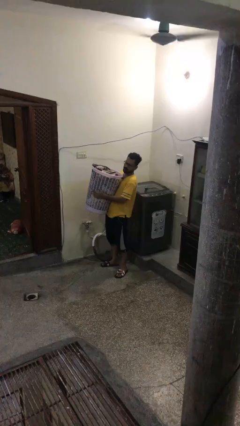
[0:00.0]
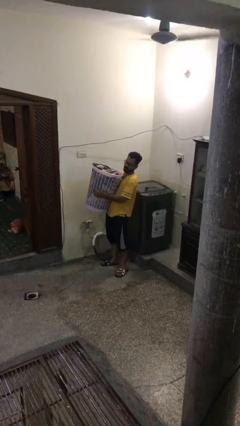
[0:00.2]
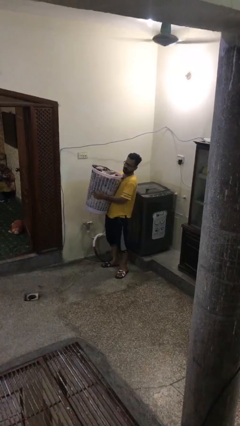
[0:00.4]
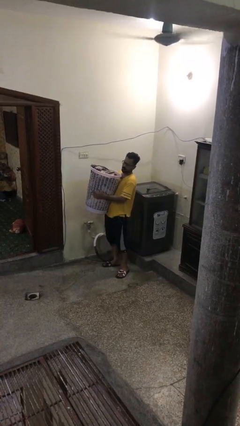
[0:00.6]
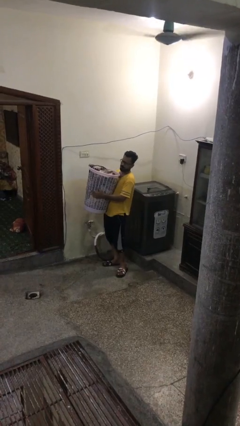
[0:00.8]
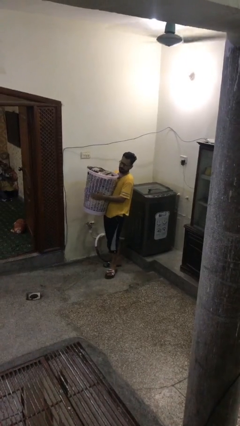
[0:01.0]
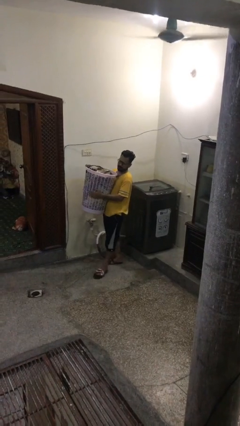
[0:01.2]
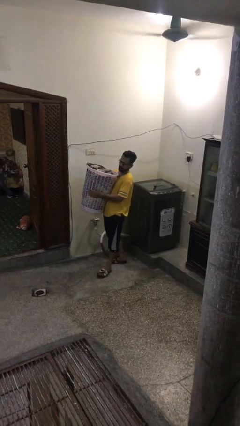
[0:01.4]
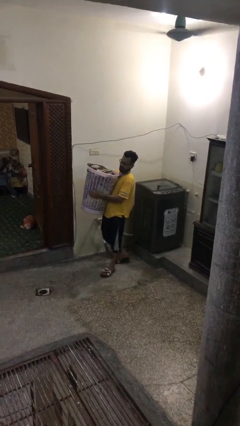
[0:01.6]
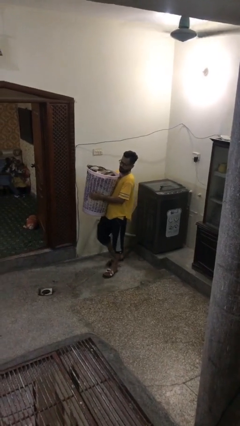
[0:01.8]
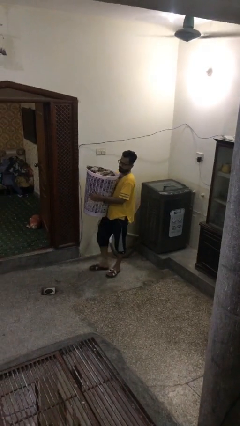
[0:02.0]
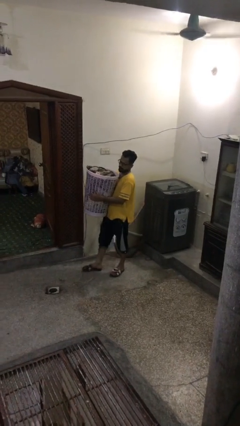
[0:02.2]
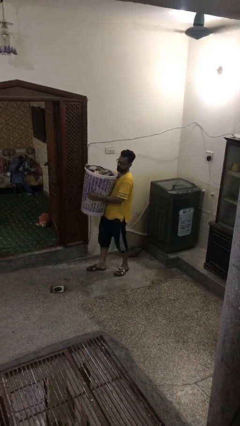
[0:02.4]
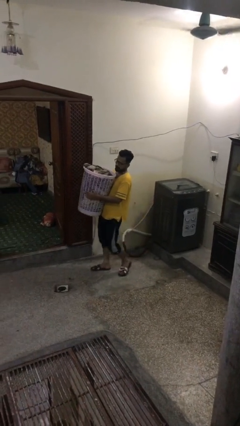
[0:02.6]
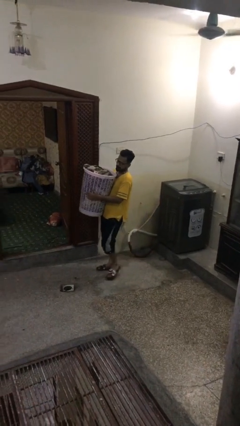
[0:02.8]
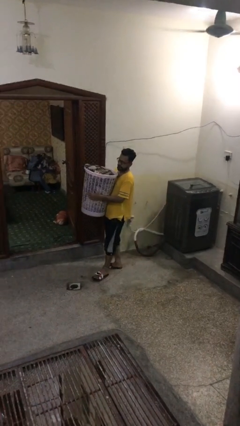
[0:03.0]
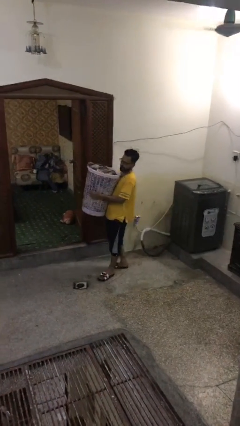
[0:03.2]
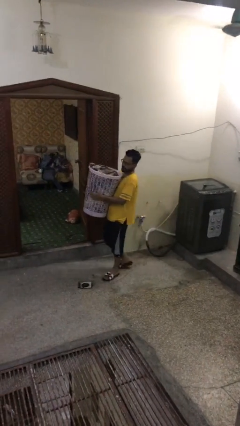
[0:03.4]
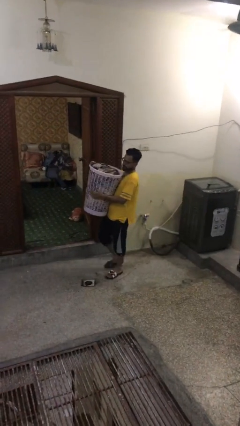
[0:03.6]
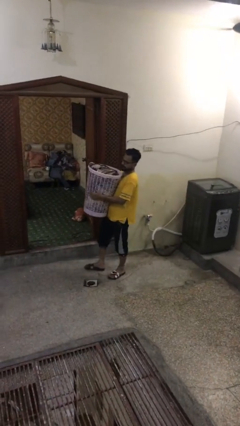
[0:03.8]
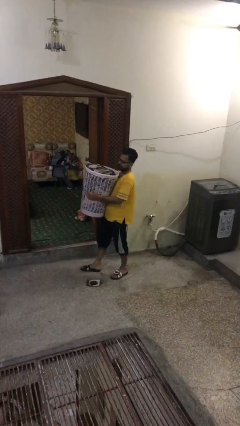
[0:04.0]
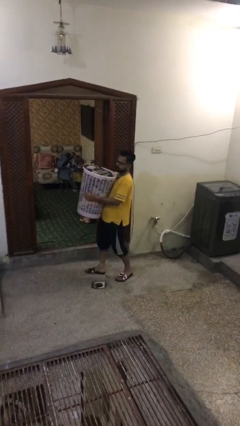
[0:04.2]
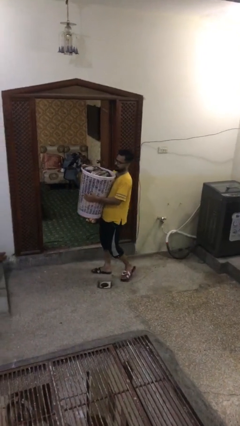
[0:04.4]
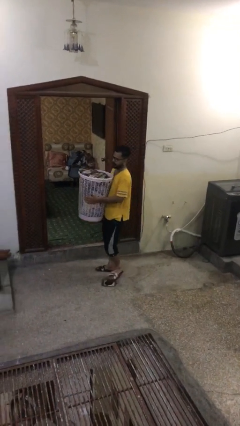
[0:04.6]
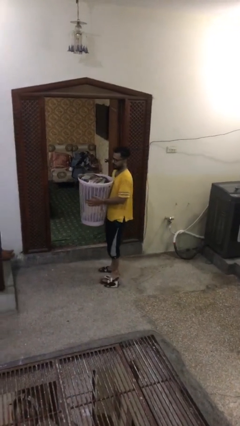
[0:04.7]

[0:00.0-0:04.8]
person carries heavy object

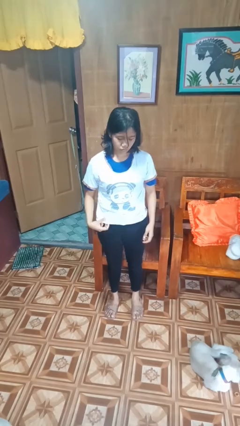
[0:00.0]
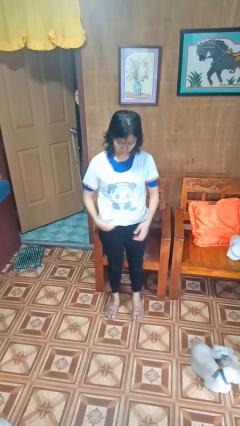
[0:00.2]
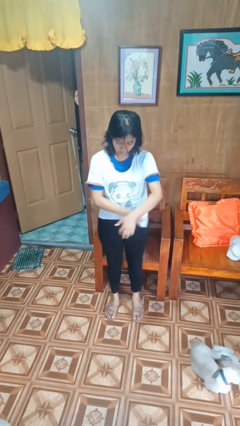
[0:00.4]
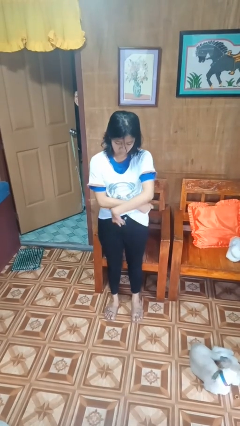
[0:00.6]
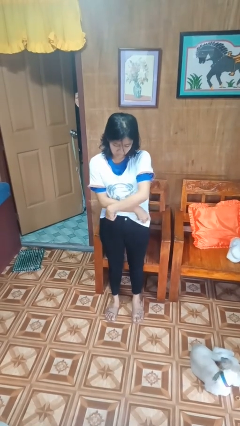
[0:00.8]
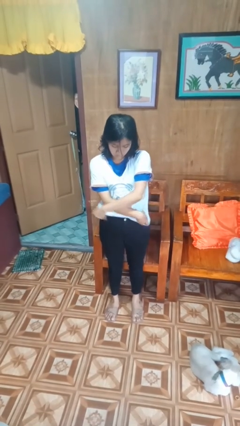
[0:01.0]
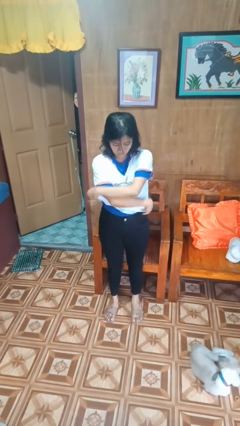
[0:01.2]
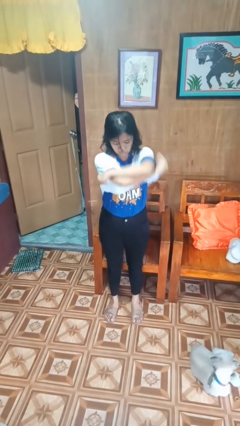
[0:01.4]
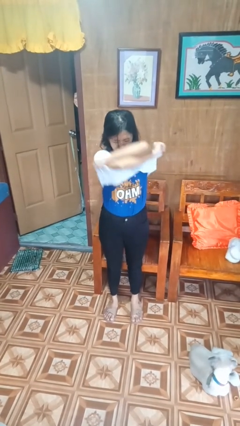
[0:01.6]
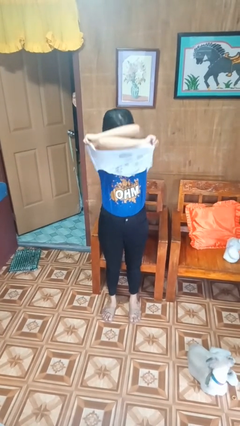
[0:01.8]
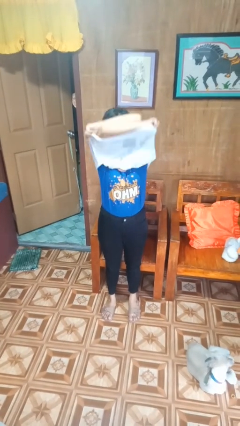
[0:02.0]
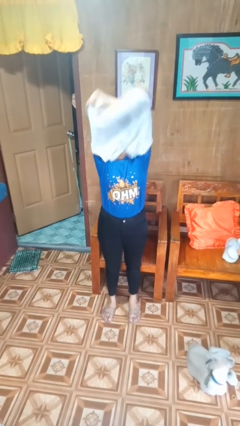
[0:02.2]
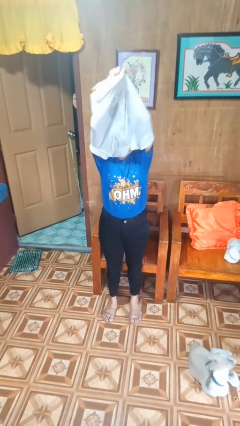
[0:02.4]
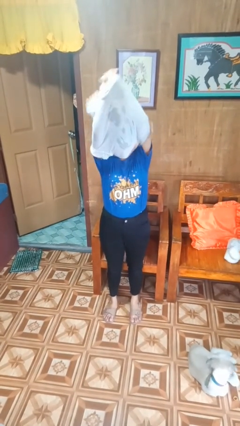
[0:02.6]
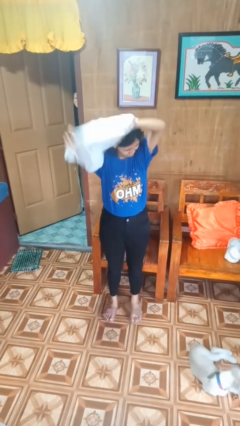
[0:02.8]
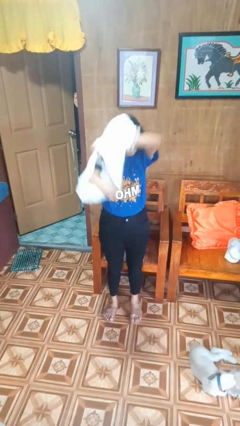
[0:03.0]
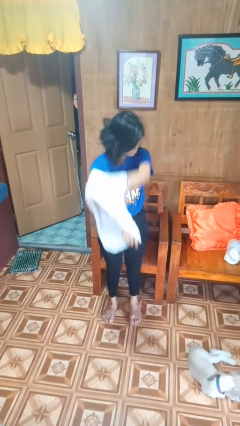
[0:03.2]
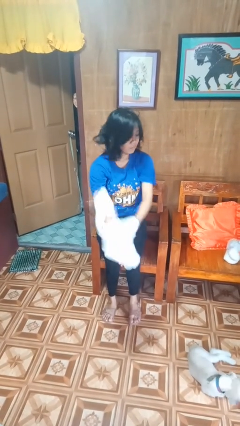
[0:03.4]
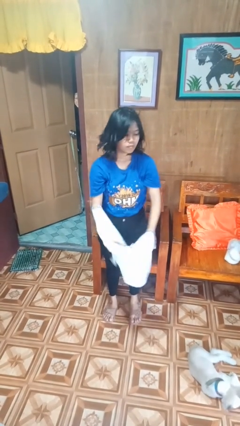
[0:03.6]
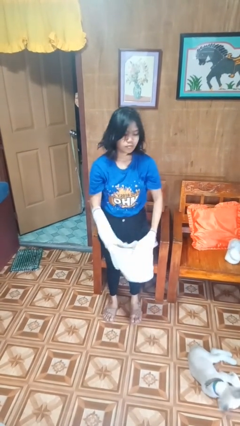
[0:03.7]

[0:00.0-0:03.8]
person takes off shirt

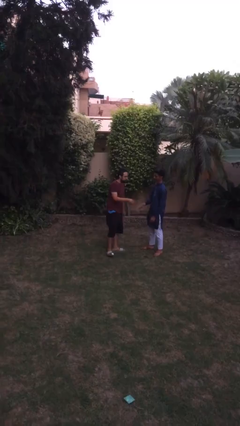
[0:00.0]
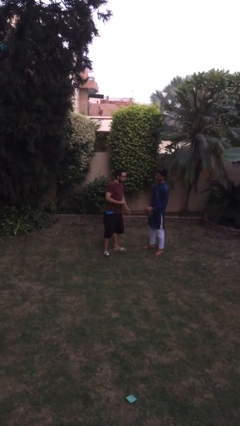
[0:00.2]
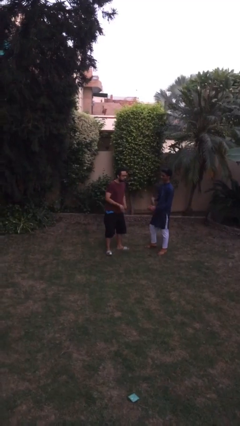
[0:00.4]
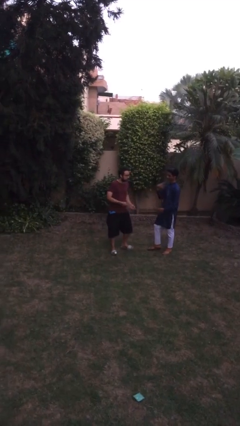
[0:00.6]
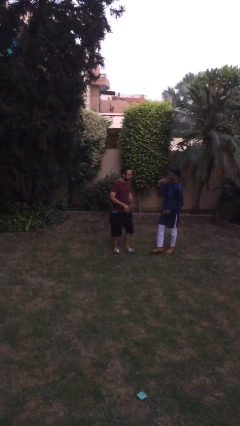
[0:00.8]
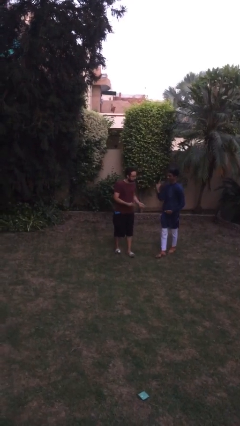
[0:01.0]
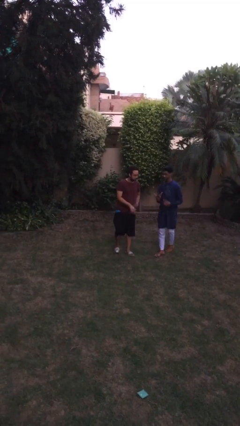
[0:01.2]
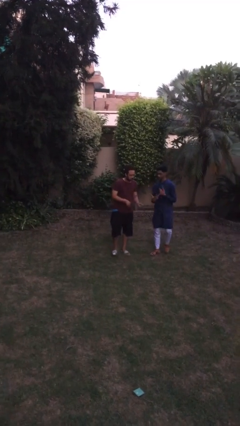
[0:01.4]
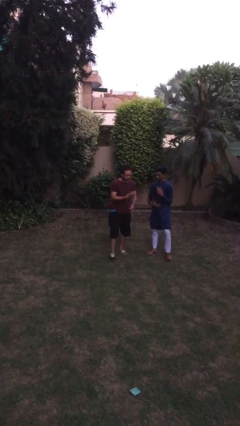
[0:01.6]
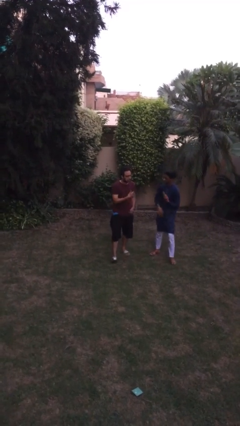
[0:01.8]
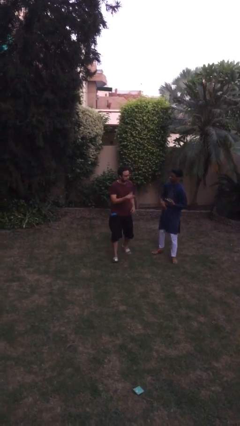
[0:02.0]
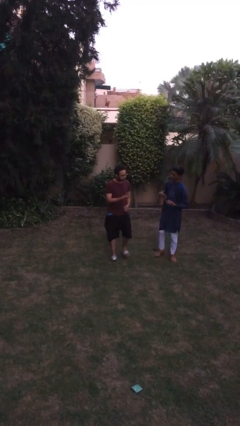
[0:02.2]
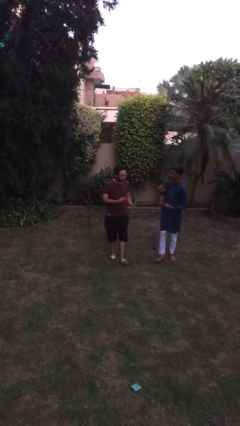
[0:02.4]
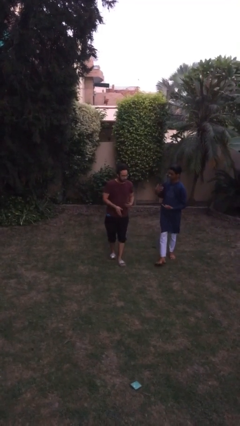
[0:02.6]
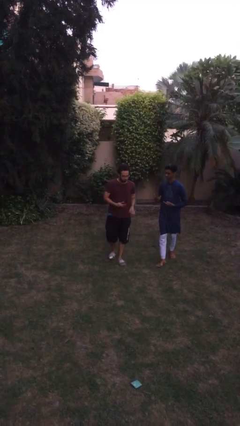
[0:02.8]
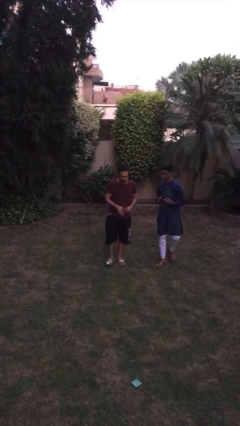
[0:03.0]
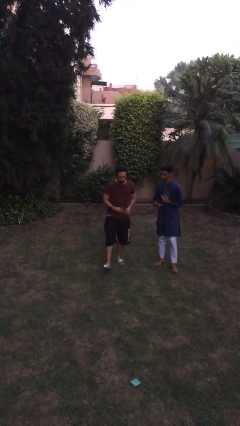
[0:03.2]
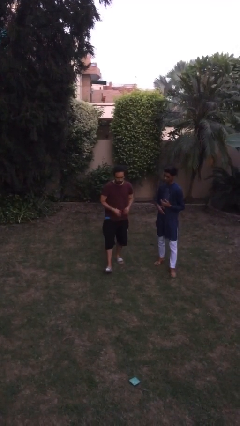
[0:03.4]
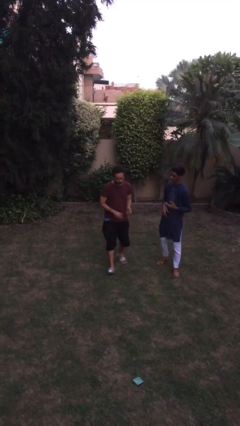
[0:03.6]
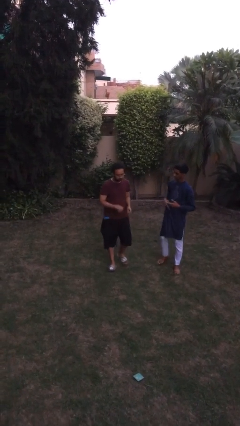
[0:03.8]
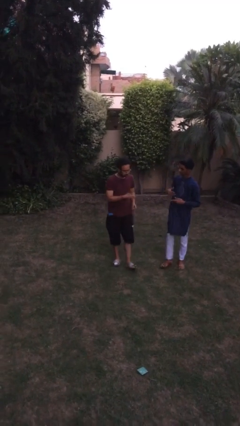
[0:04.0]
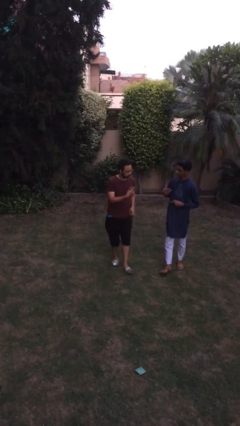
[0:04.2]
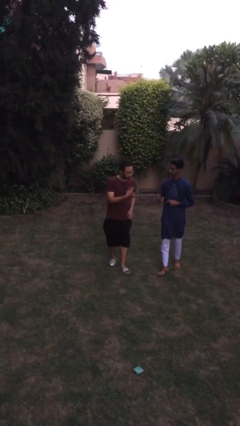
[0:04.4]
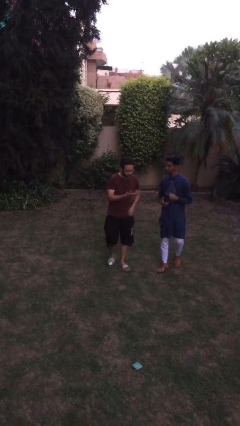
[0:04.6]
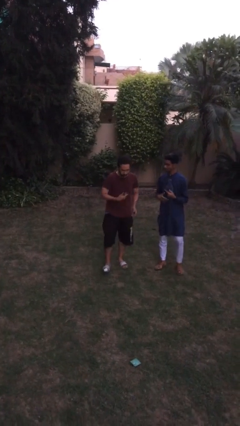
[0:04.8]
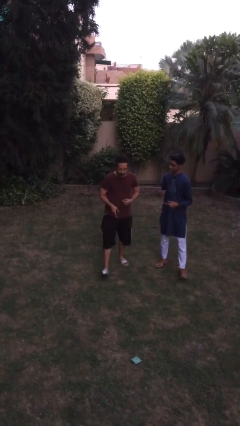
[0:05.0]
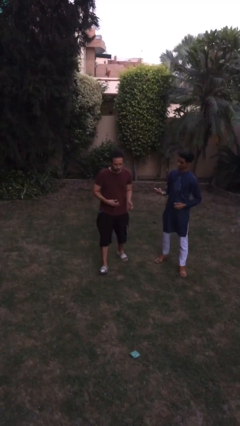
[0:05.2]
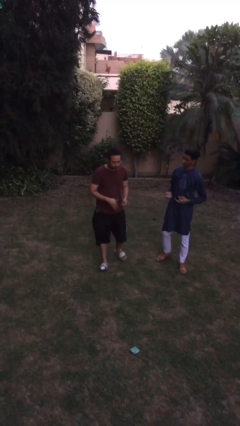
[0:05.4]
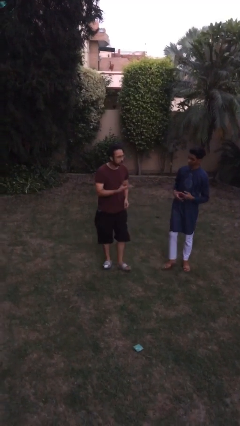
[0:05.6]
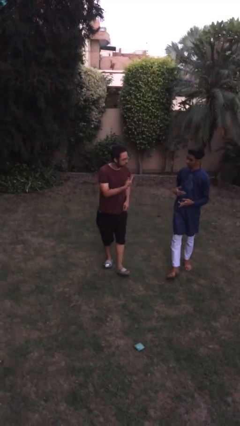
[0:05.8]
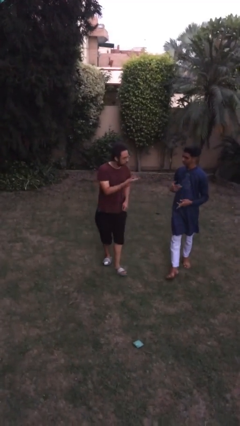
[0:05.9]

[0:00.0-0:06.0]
person talks to person

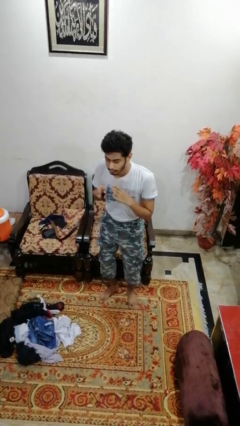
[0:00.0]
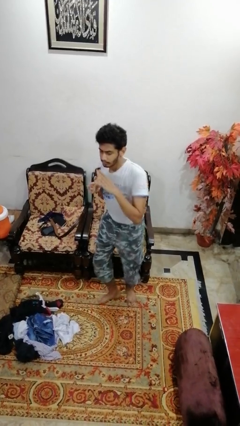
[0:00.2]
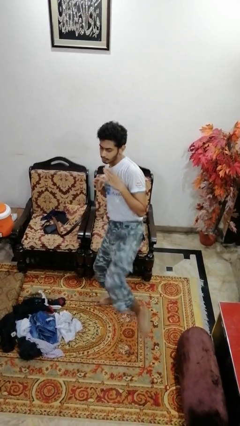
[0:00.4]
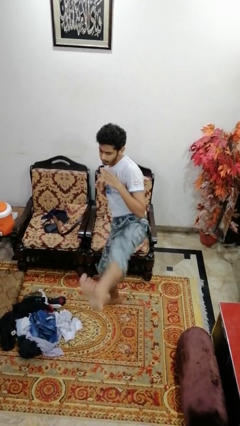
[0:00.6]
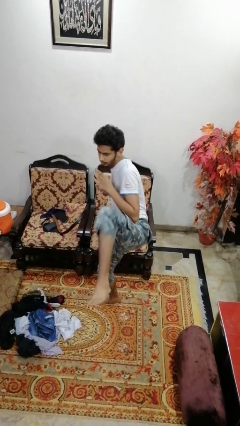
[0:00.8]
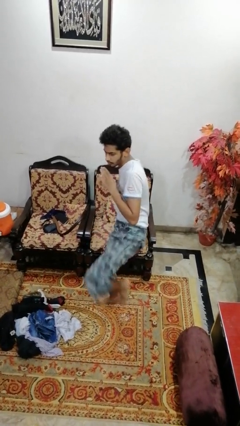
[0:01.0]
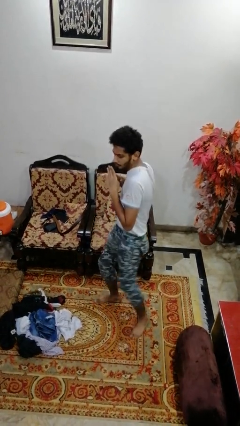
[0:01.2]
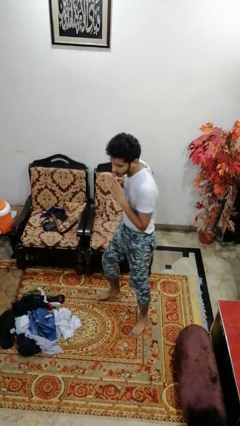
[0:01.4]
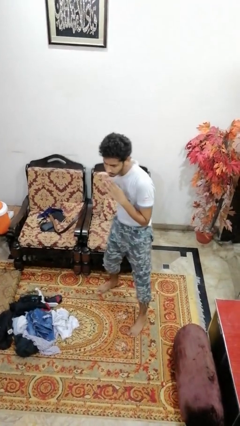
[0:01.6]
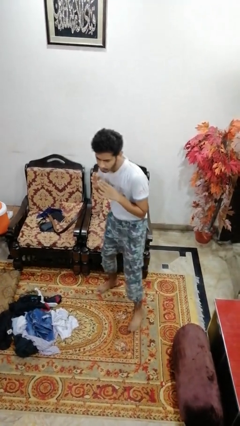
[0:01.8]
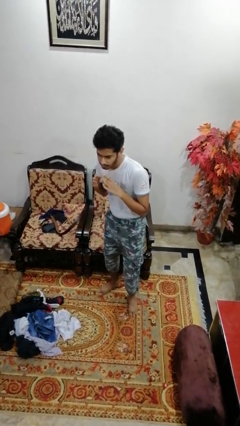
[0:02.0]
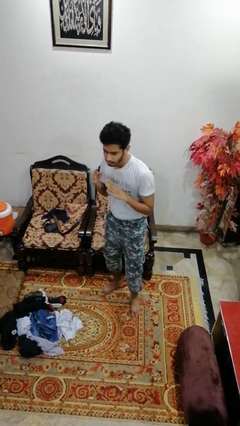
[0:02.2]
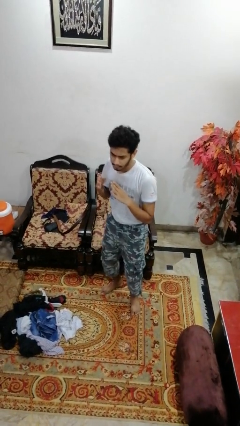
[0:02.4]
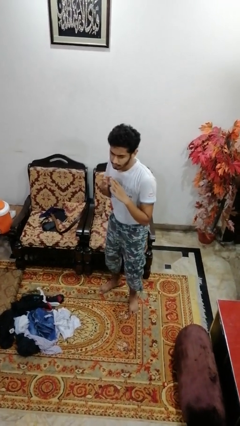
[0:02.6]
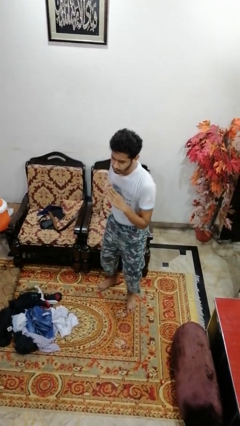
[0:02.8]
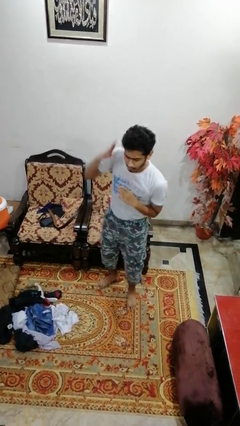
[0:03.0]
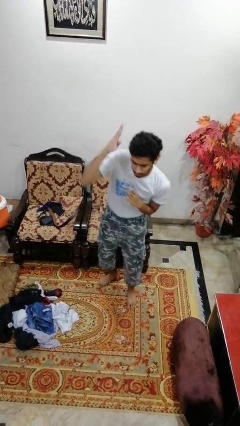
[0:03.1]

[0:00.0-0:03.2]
person karate kicks
